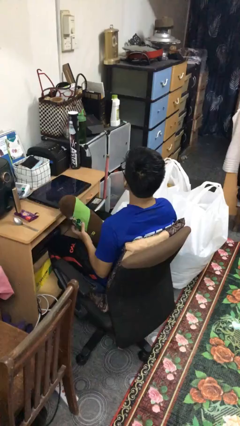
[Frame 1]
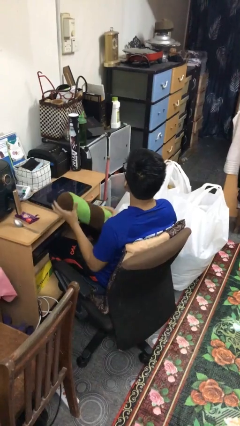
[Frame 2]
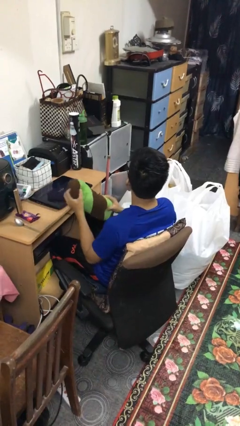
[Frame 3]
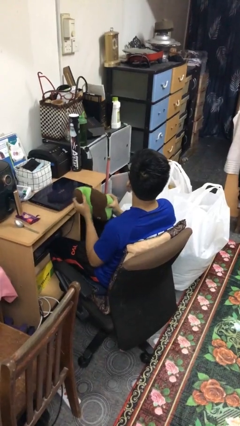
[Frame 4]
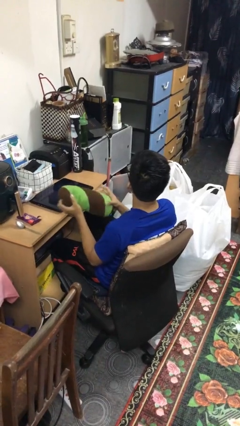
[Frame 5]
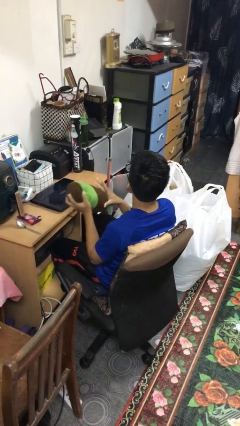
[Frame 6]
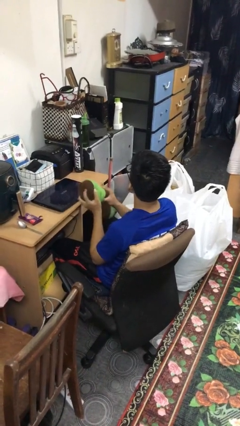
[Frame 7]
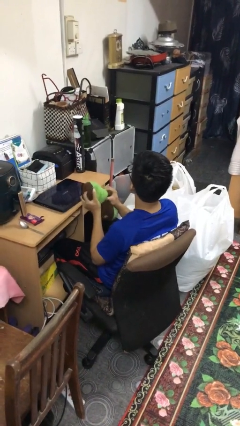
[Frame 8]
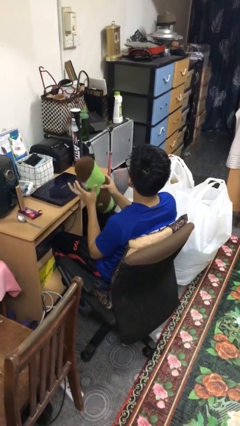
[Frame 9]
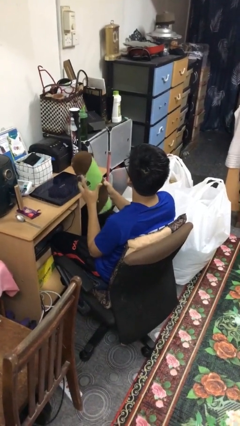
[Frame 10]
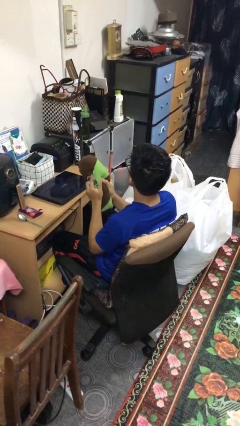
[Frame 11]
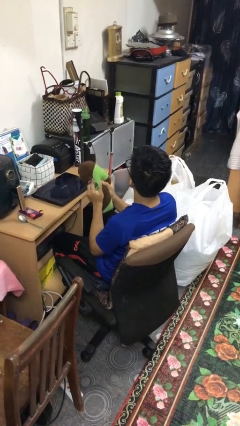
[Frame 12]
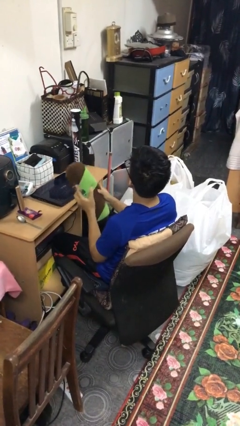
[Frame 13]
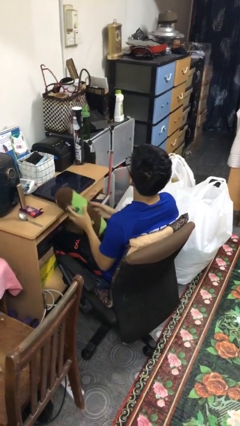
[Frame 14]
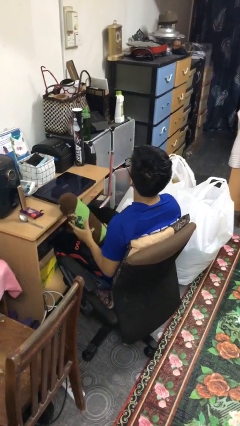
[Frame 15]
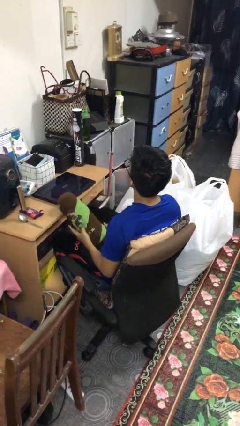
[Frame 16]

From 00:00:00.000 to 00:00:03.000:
person squeezes object

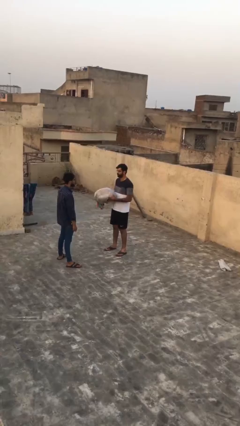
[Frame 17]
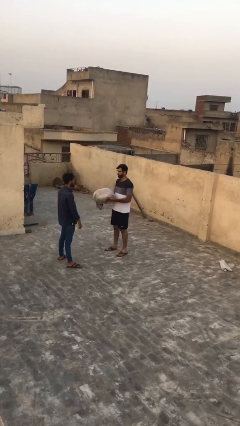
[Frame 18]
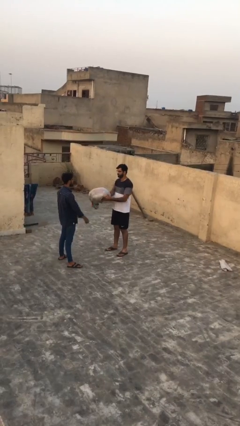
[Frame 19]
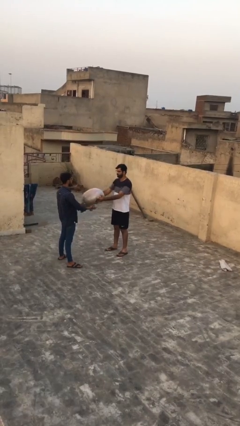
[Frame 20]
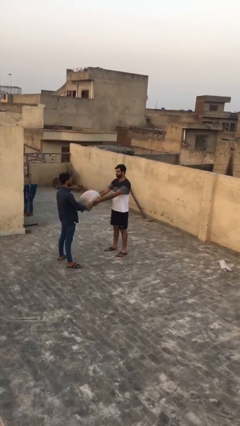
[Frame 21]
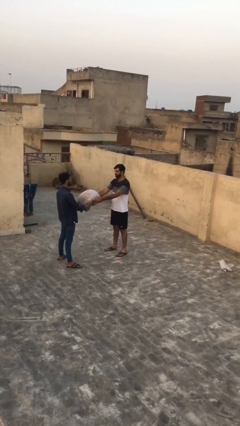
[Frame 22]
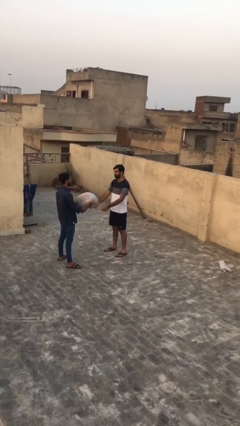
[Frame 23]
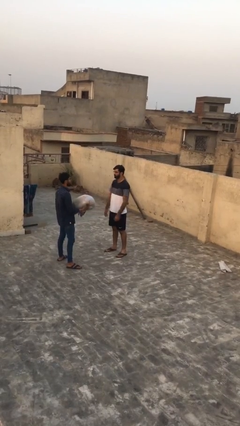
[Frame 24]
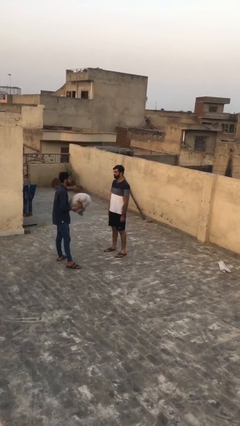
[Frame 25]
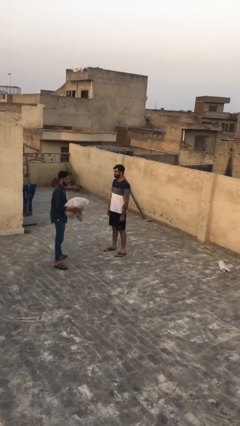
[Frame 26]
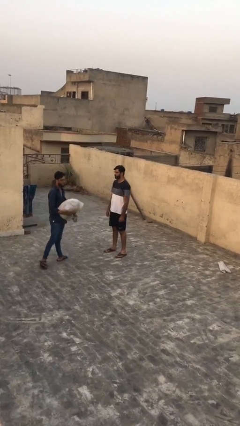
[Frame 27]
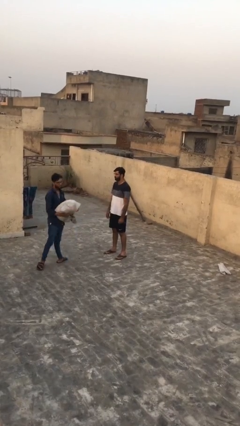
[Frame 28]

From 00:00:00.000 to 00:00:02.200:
person transfers object to person

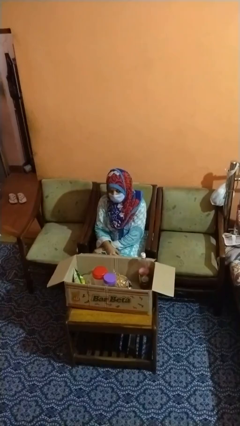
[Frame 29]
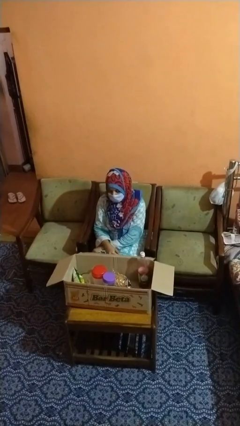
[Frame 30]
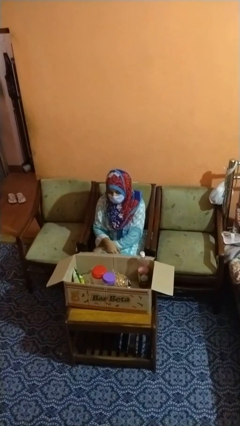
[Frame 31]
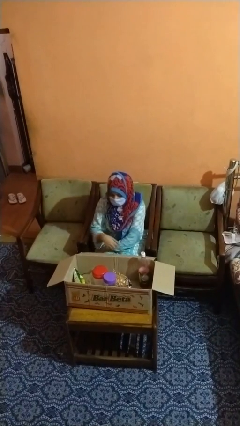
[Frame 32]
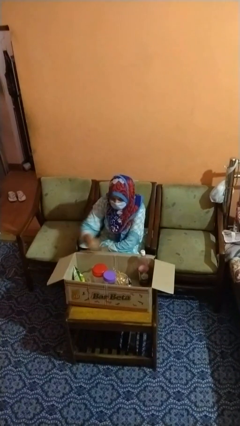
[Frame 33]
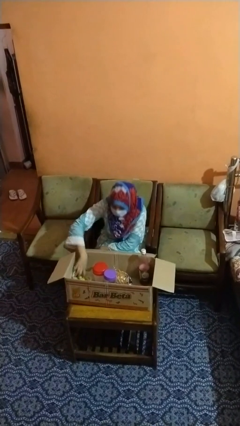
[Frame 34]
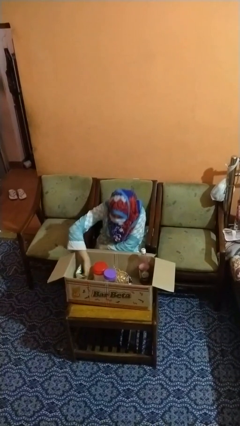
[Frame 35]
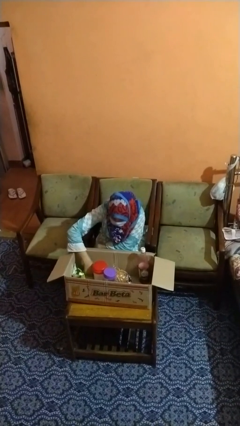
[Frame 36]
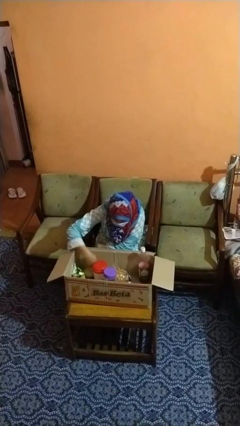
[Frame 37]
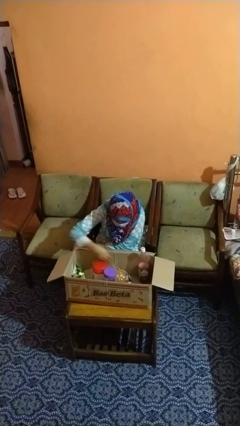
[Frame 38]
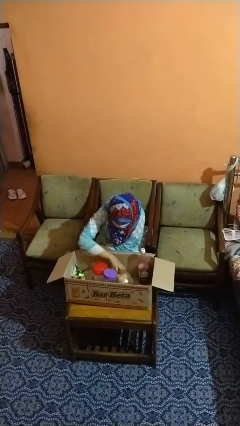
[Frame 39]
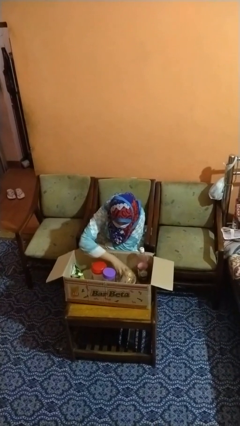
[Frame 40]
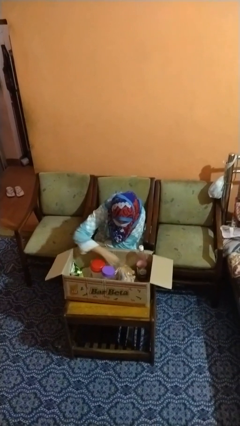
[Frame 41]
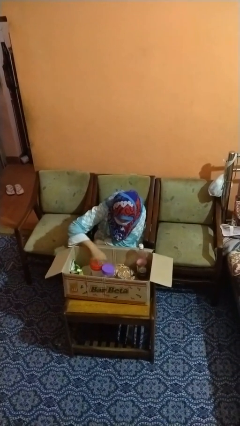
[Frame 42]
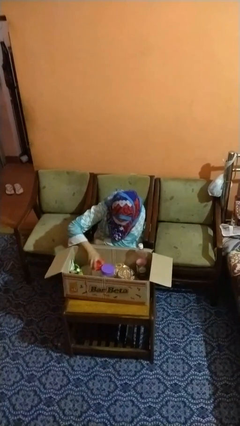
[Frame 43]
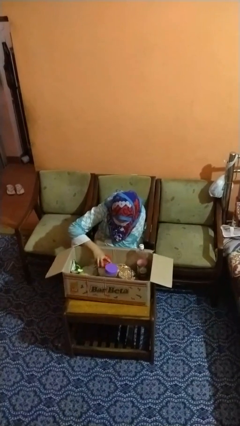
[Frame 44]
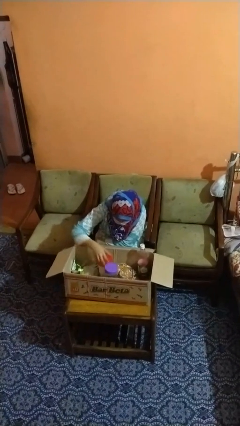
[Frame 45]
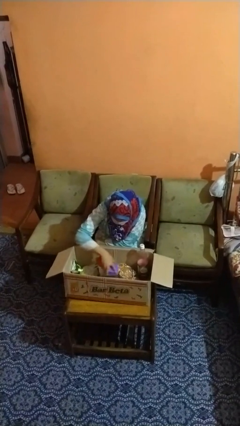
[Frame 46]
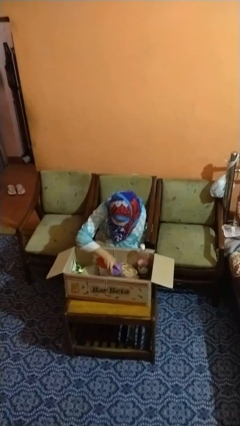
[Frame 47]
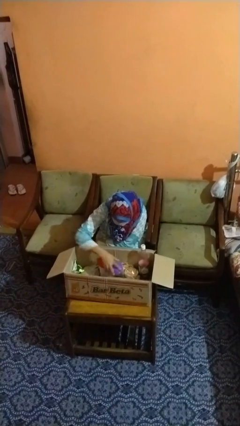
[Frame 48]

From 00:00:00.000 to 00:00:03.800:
person searches in box

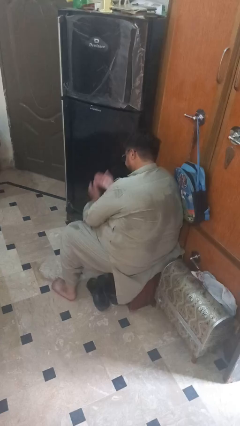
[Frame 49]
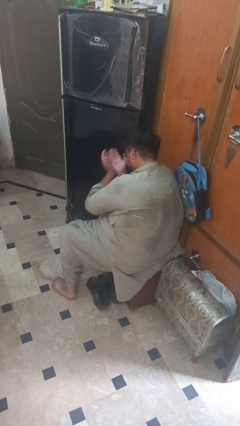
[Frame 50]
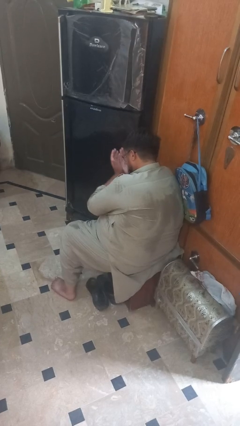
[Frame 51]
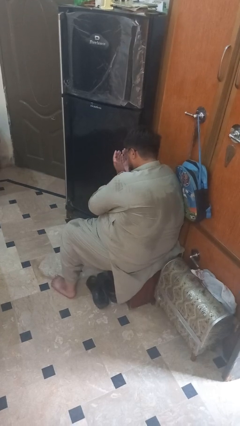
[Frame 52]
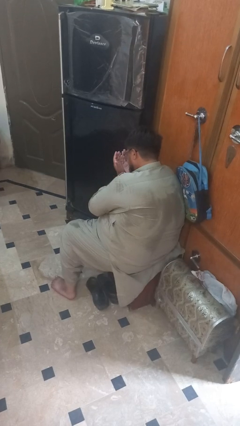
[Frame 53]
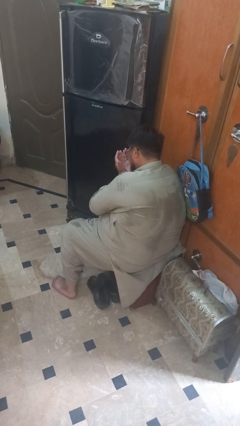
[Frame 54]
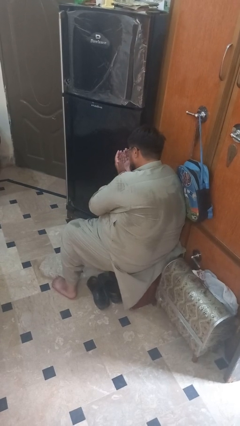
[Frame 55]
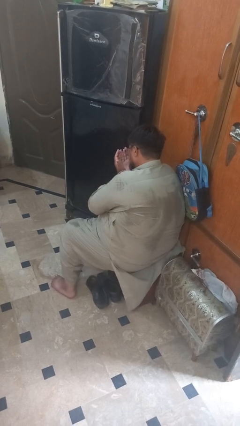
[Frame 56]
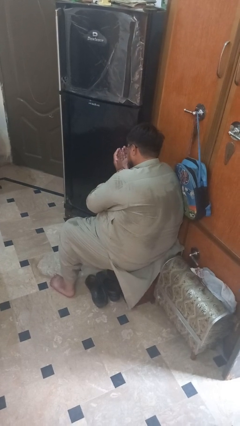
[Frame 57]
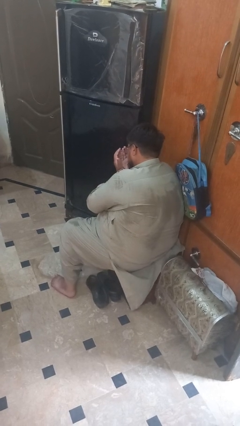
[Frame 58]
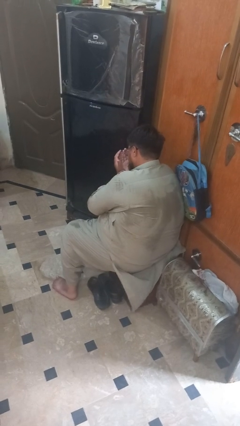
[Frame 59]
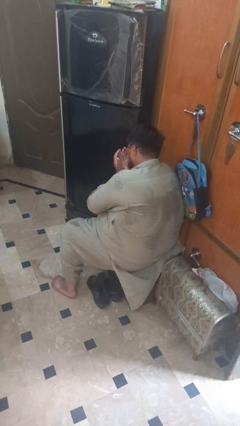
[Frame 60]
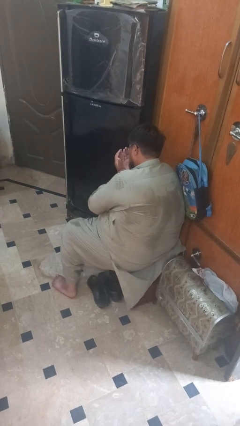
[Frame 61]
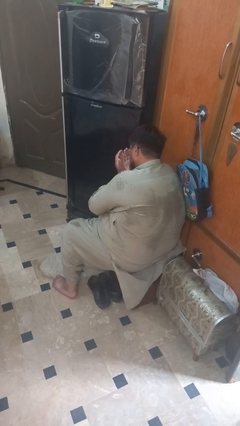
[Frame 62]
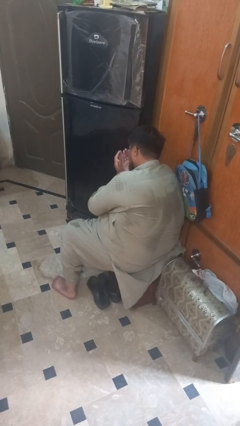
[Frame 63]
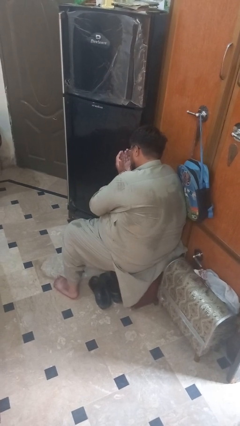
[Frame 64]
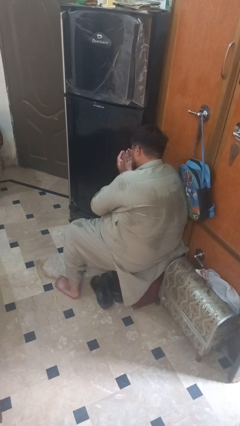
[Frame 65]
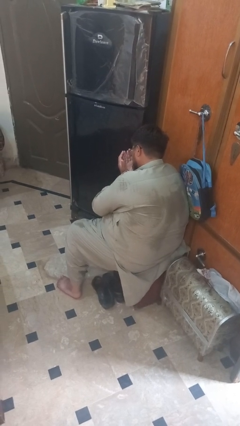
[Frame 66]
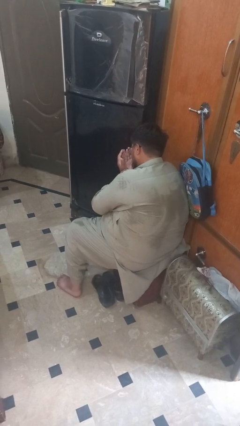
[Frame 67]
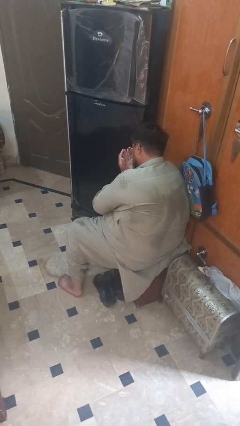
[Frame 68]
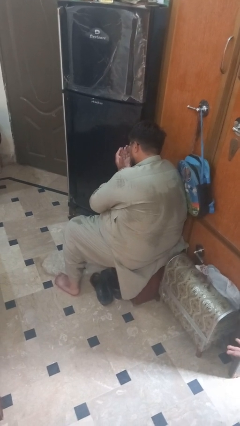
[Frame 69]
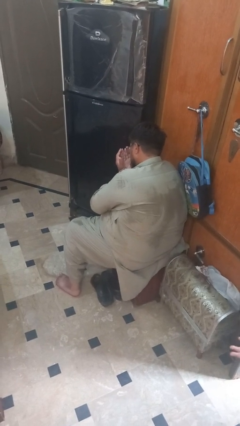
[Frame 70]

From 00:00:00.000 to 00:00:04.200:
person prays

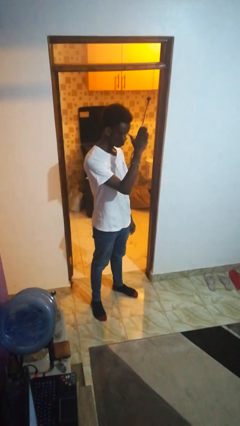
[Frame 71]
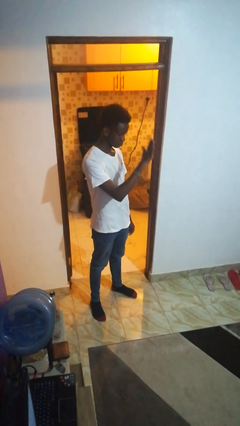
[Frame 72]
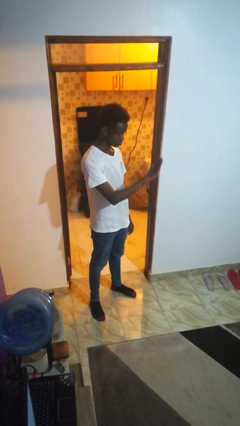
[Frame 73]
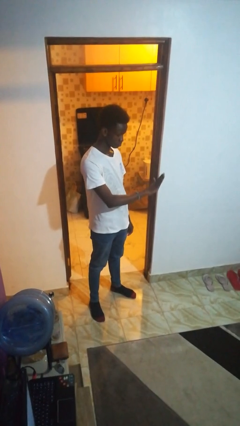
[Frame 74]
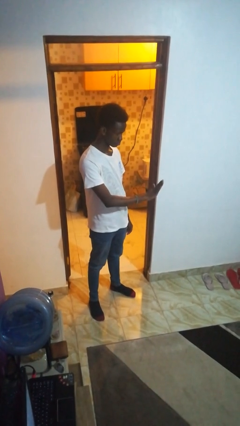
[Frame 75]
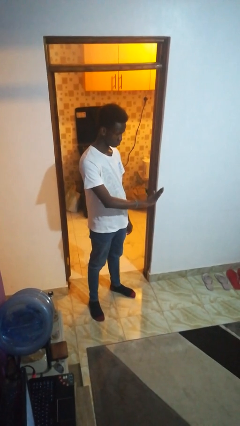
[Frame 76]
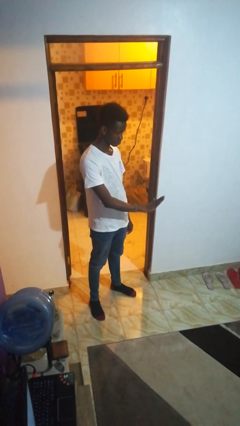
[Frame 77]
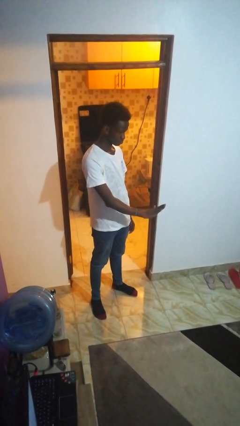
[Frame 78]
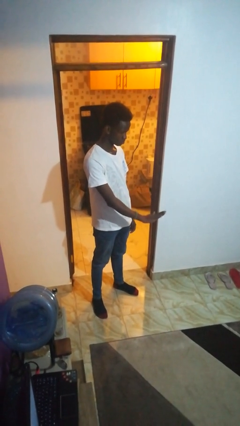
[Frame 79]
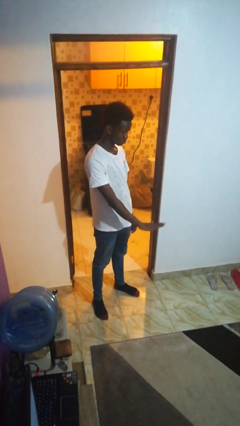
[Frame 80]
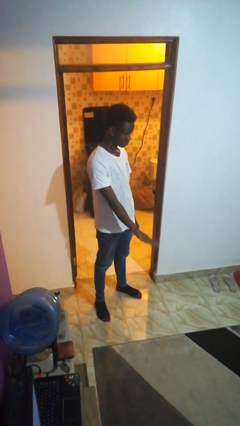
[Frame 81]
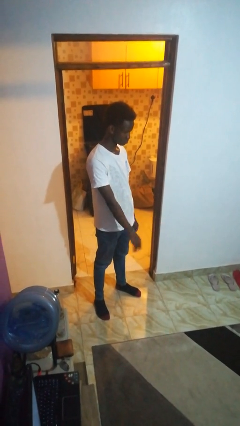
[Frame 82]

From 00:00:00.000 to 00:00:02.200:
person gestures swipe down

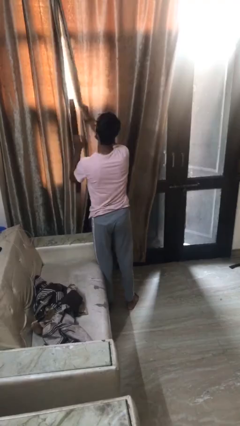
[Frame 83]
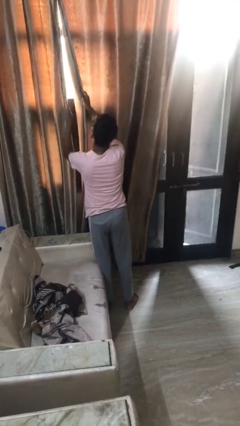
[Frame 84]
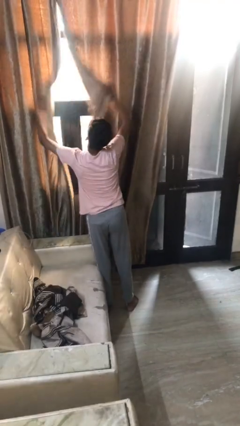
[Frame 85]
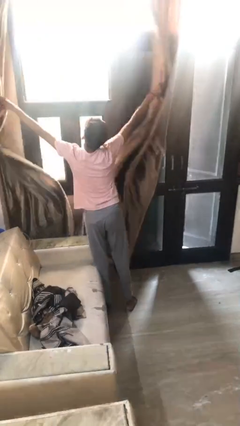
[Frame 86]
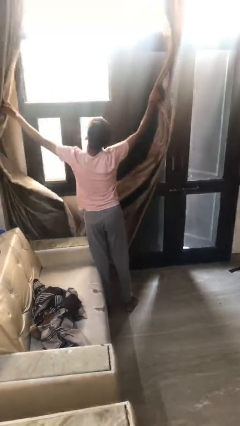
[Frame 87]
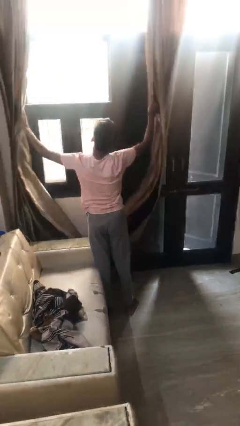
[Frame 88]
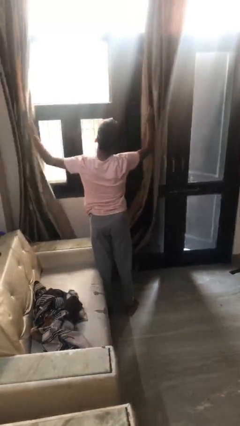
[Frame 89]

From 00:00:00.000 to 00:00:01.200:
person opens curtains

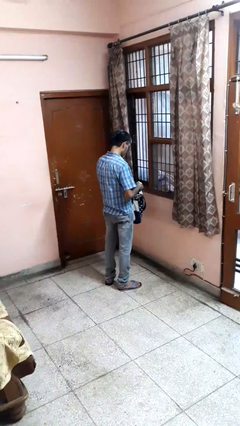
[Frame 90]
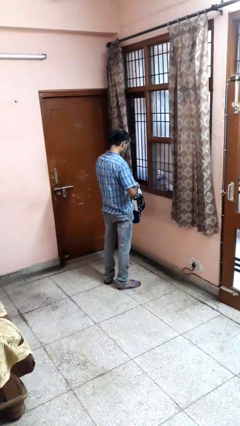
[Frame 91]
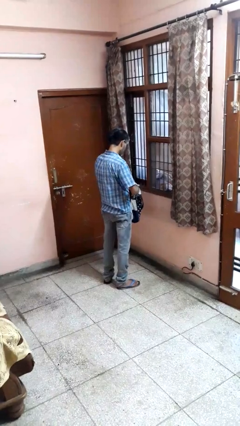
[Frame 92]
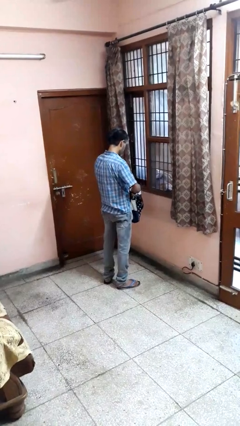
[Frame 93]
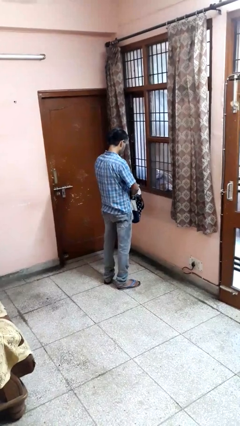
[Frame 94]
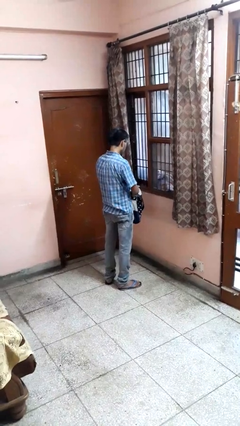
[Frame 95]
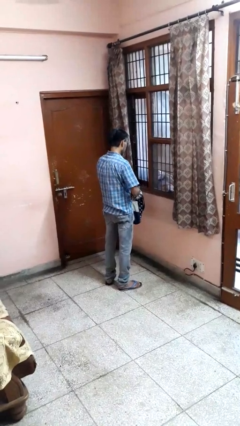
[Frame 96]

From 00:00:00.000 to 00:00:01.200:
person puts object into bag
